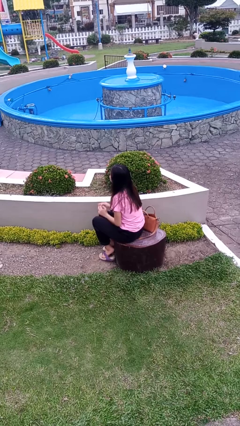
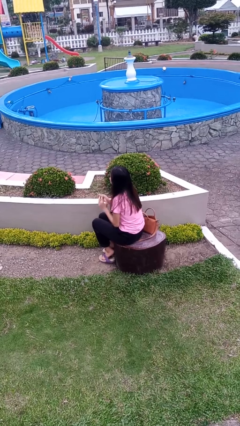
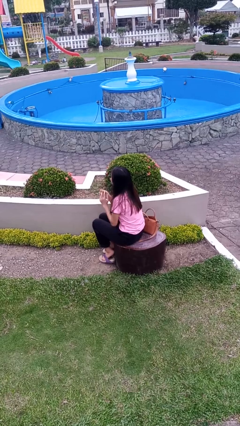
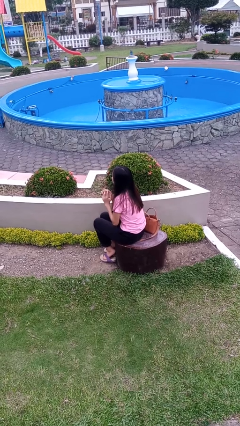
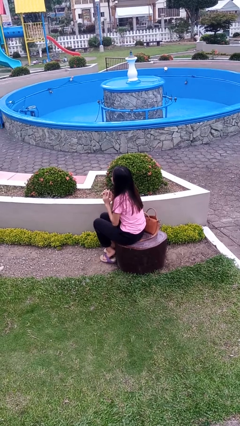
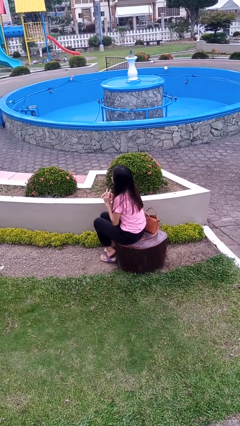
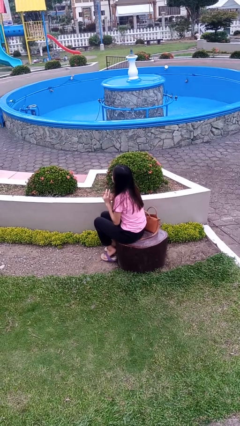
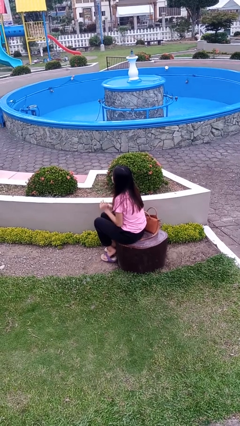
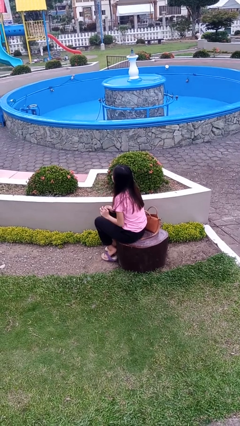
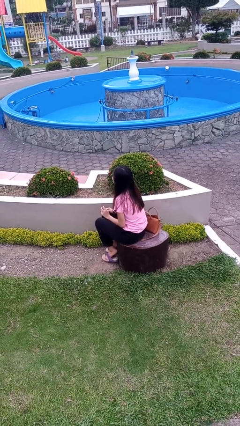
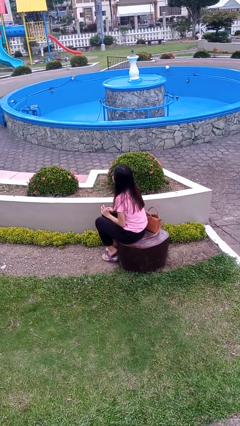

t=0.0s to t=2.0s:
person puts on ring

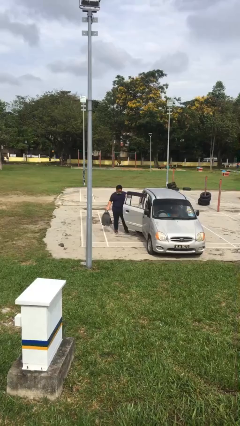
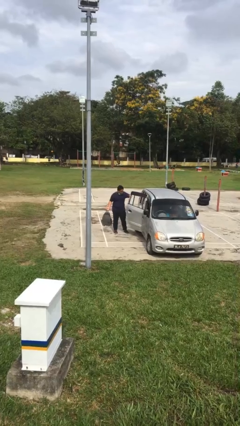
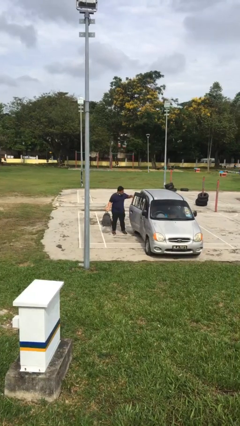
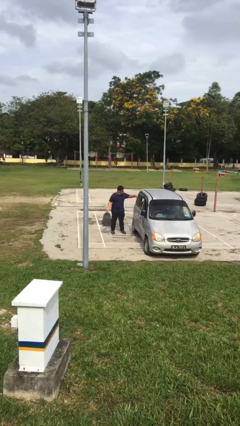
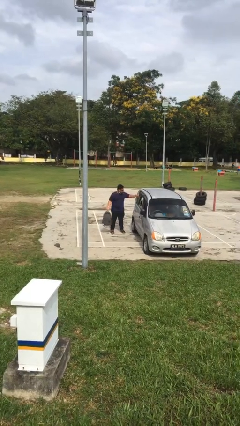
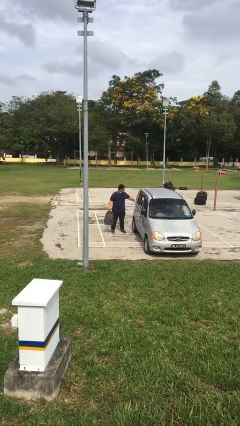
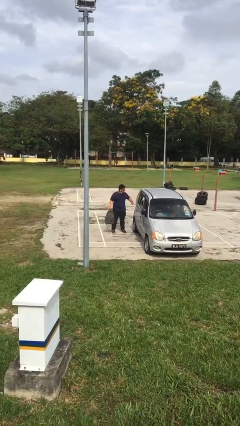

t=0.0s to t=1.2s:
person closes car door

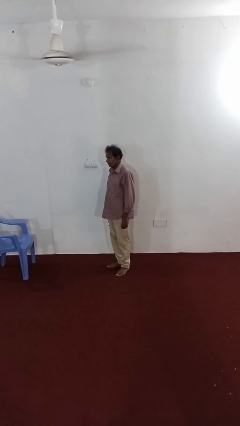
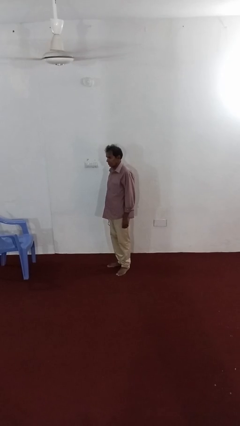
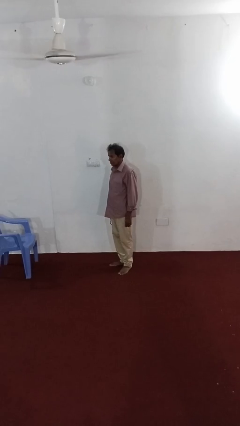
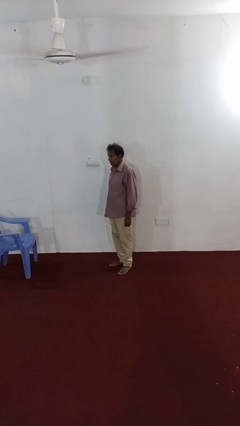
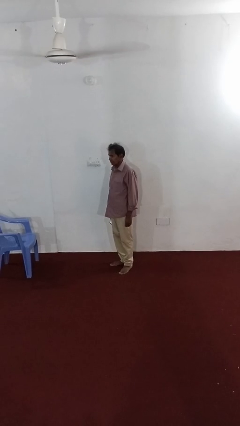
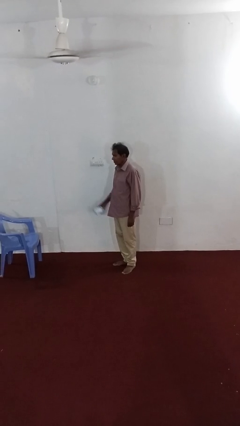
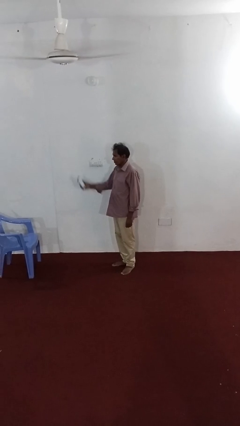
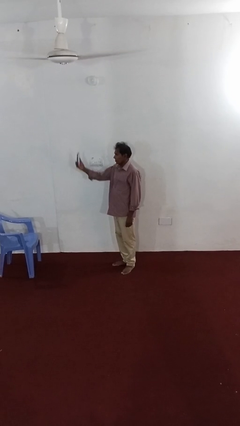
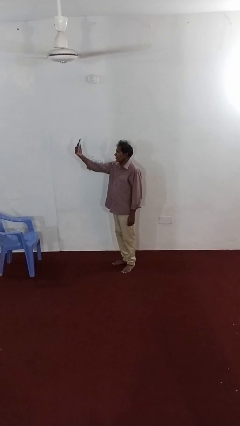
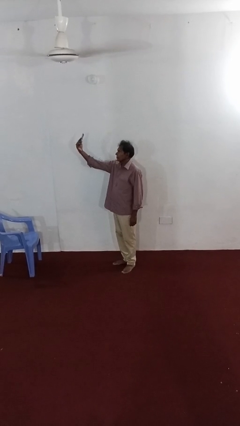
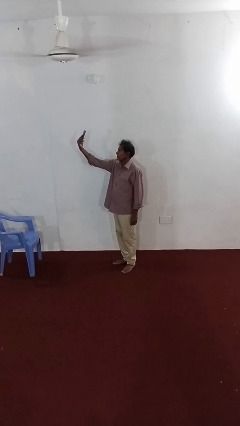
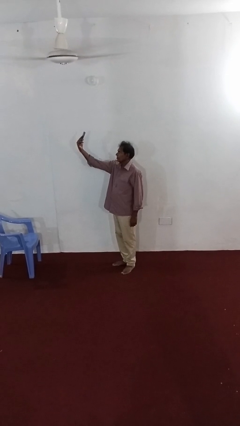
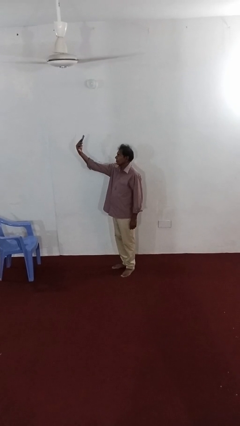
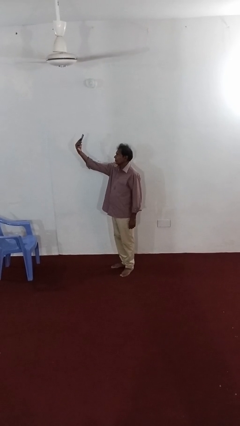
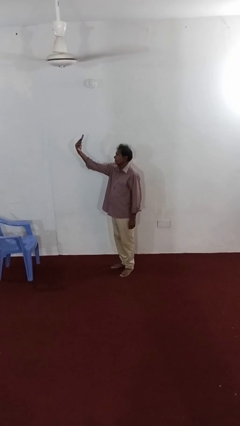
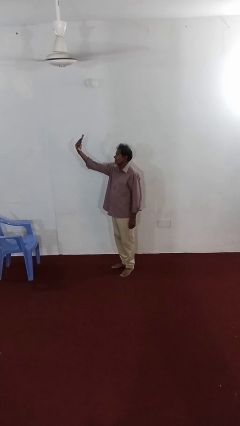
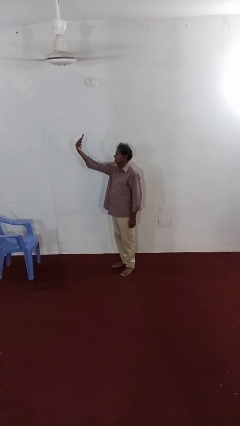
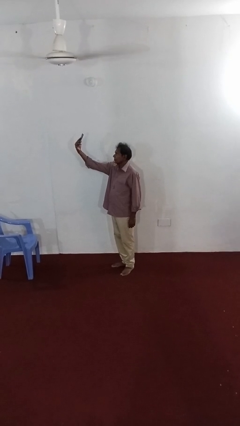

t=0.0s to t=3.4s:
person takes selfie

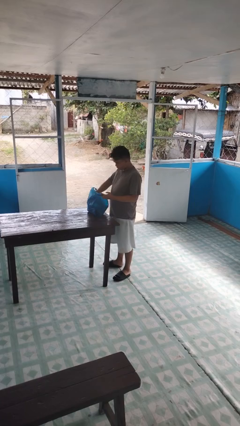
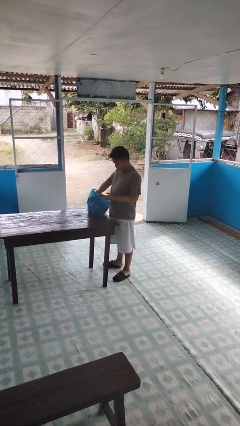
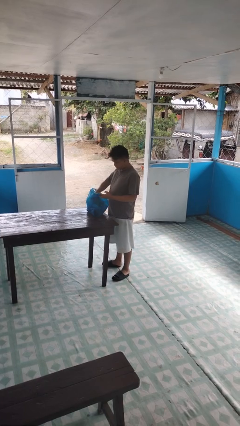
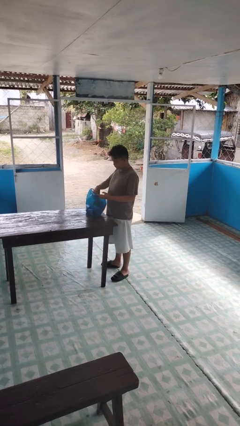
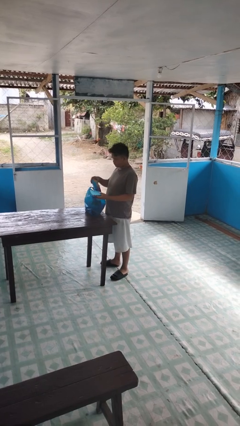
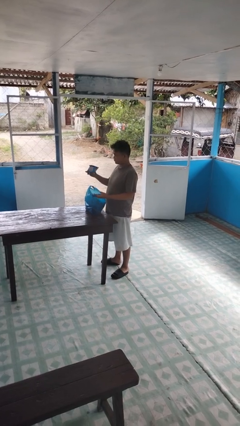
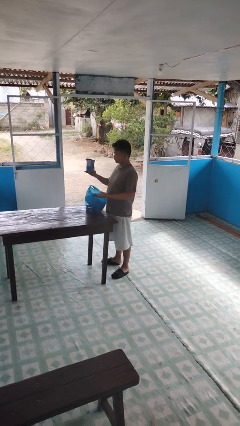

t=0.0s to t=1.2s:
person takes object from bag

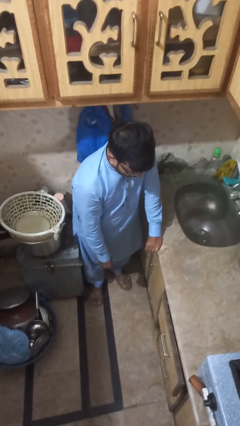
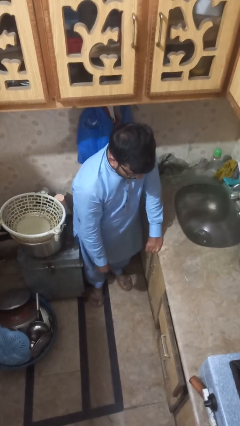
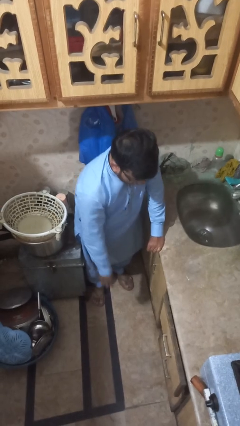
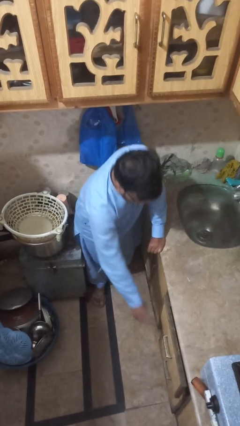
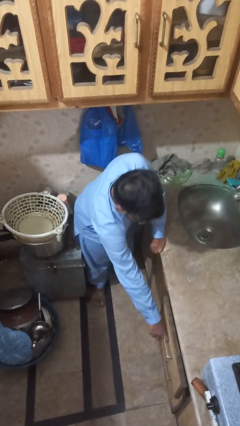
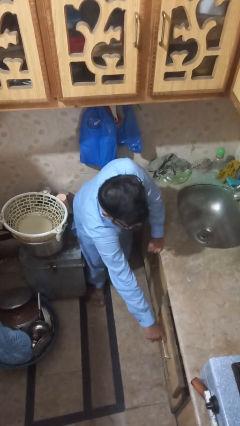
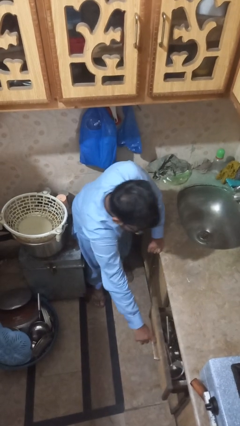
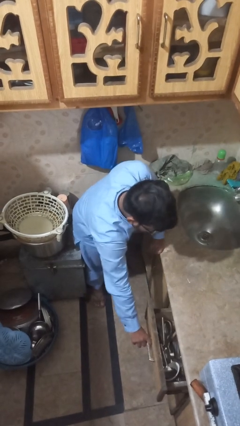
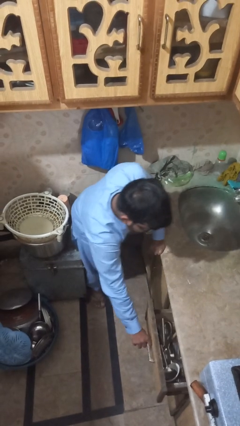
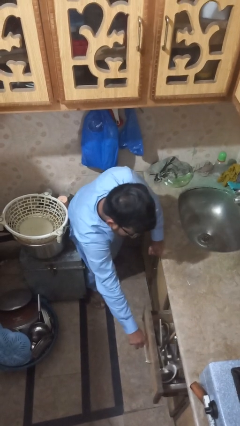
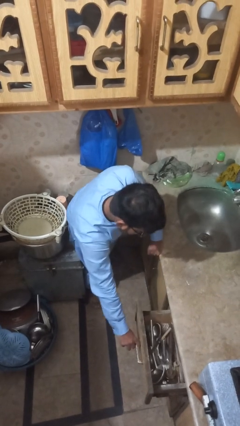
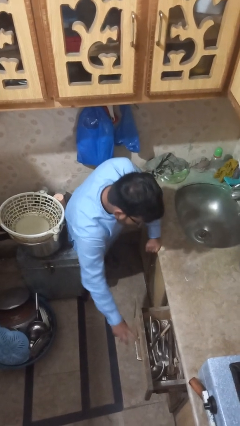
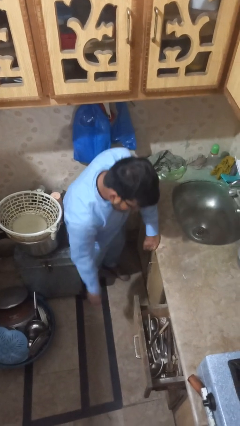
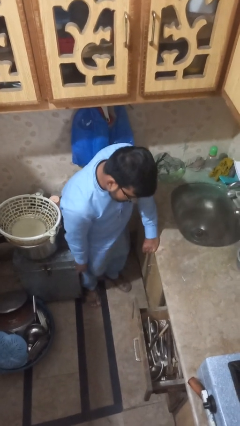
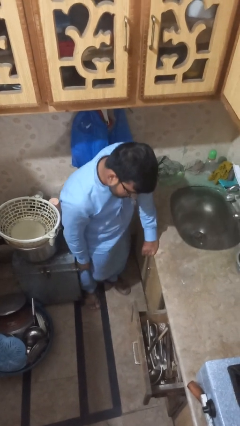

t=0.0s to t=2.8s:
person opens kitchen drawer

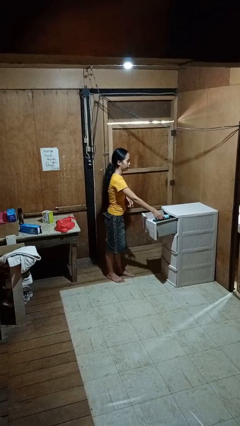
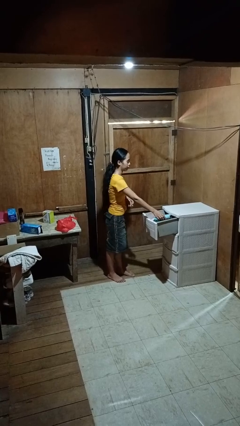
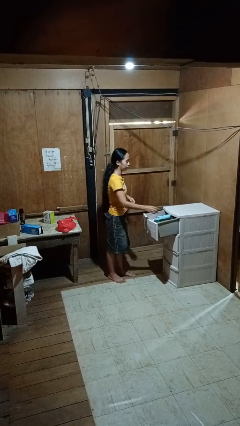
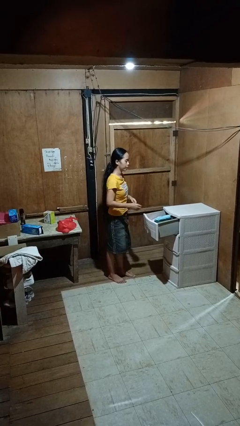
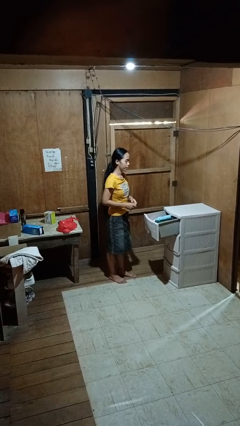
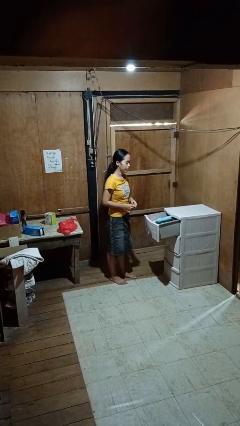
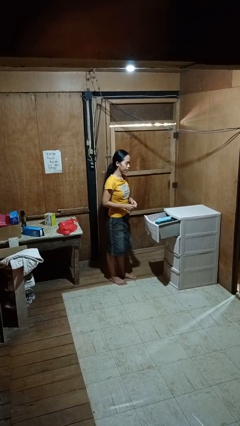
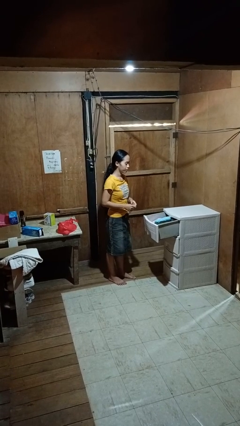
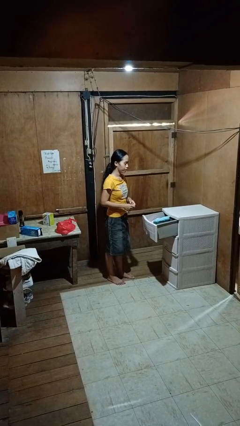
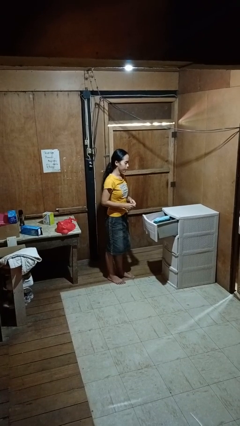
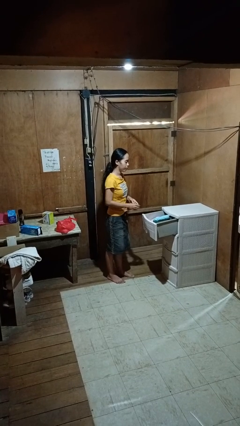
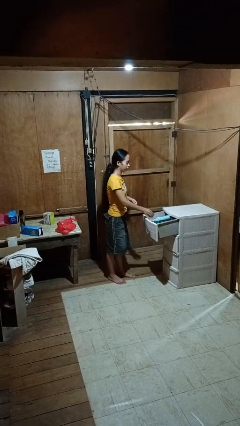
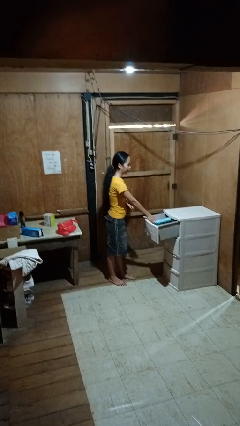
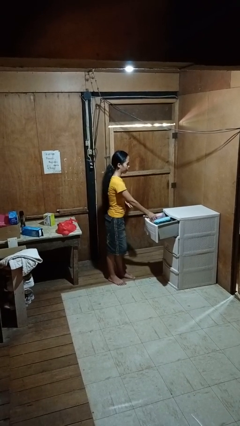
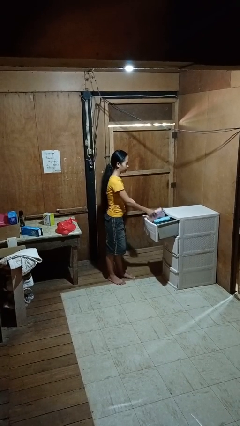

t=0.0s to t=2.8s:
person puts clothes into dresser

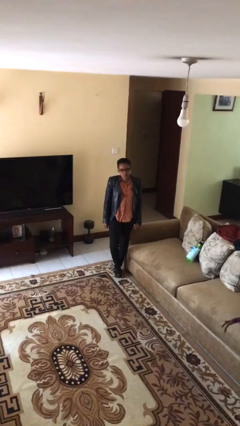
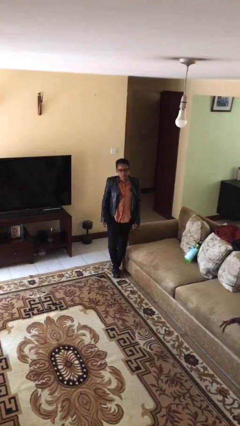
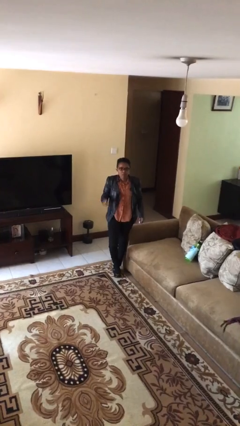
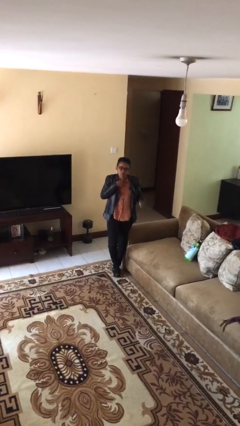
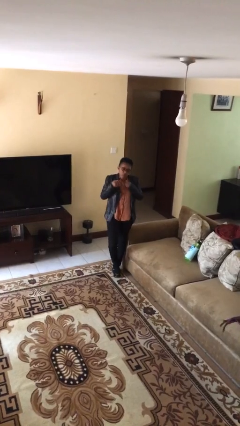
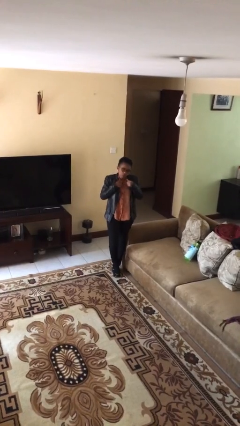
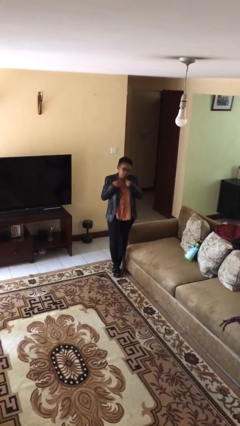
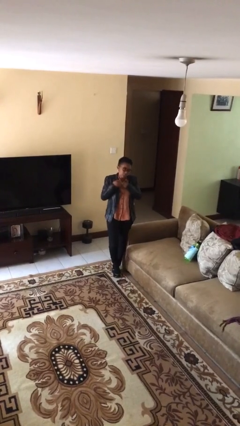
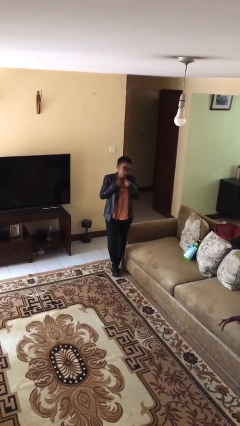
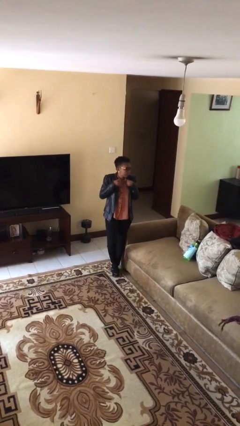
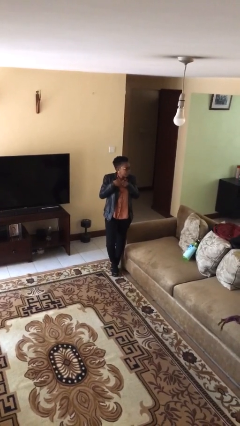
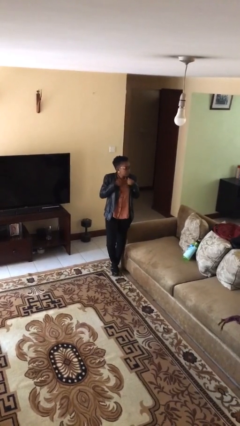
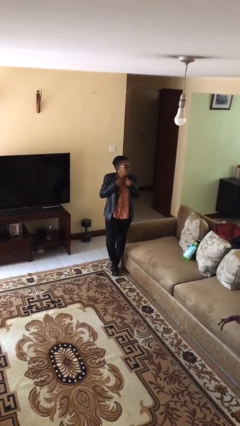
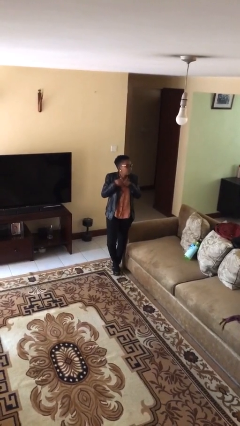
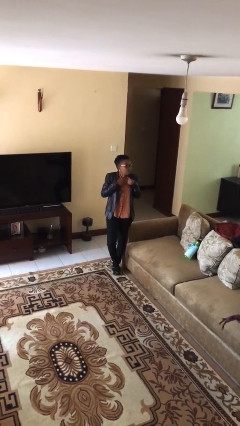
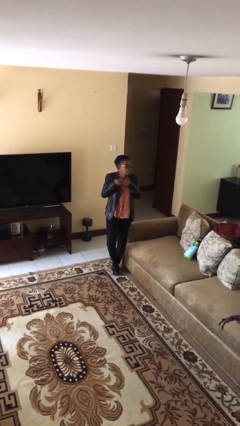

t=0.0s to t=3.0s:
person drums on chest

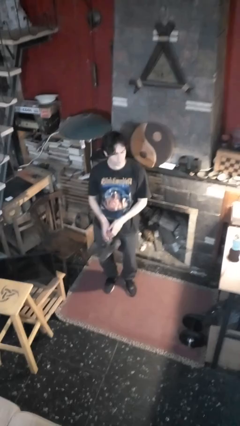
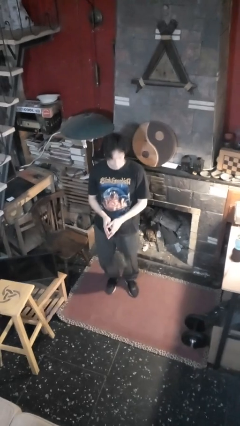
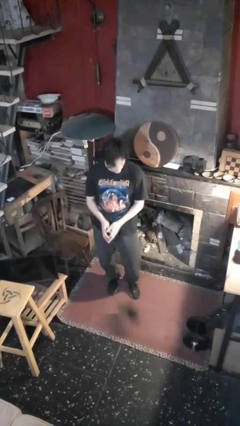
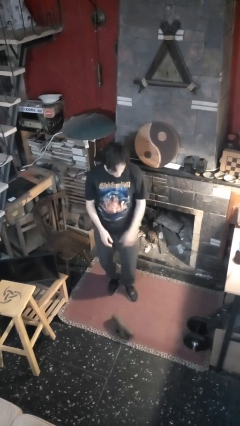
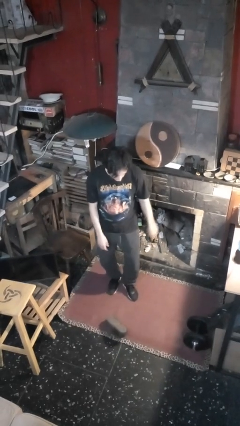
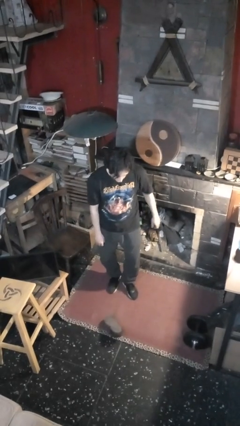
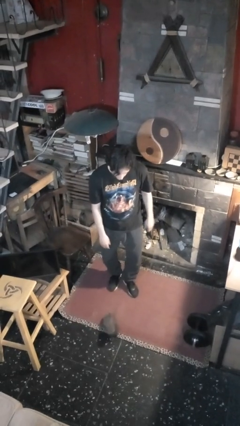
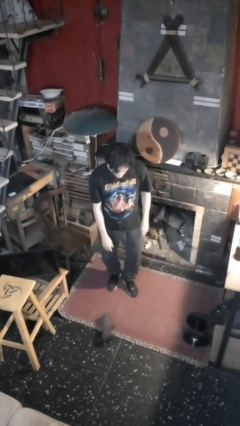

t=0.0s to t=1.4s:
person drops object
